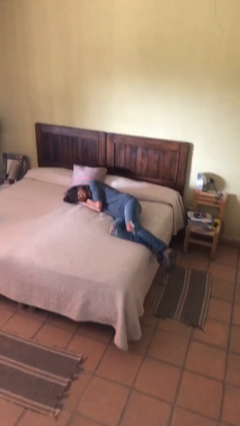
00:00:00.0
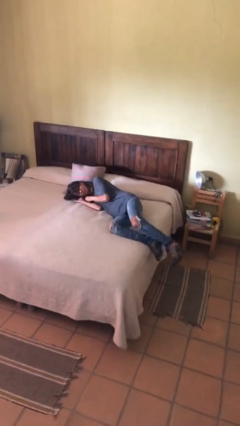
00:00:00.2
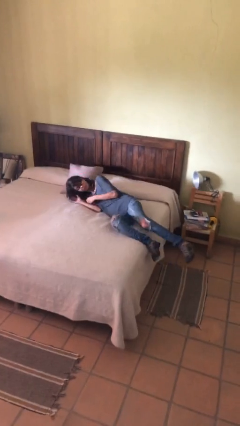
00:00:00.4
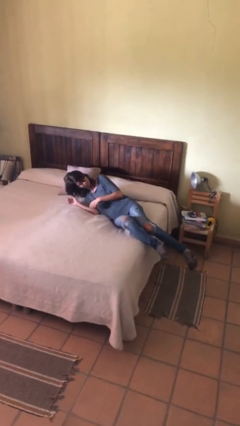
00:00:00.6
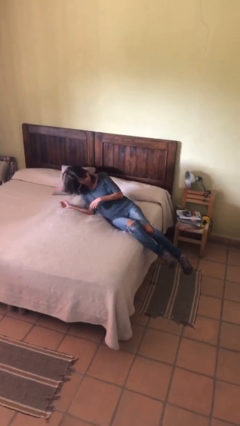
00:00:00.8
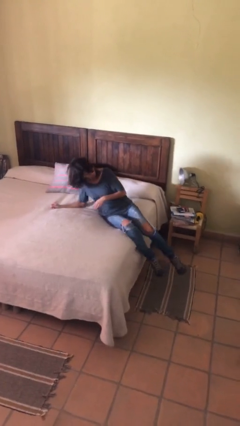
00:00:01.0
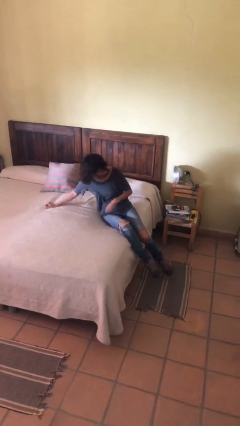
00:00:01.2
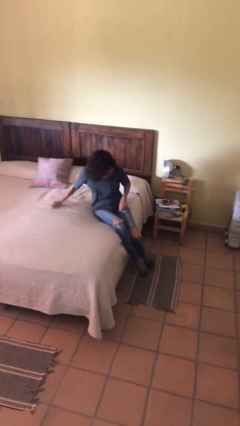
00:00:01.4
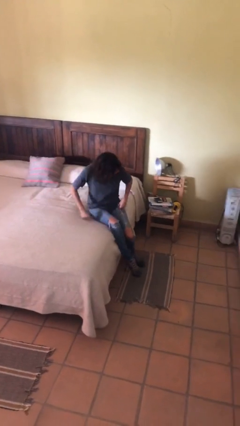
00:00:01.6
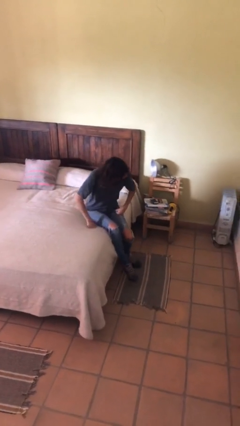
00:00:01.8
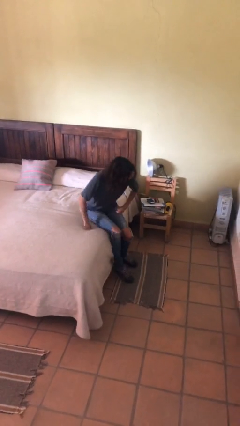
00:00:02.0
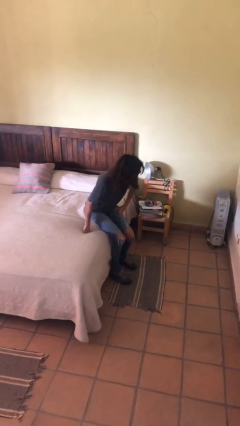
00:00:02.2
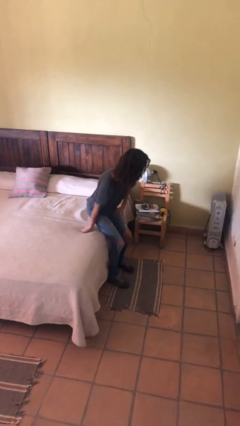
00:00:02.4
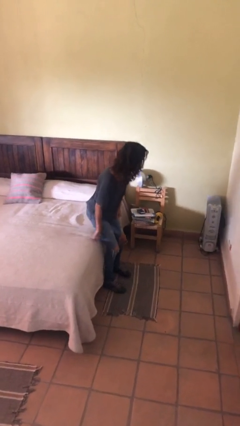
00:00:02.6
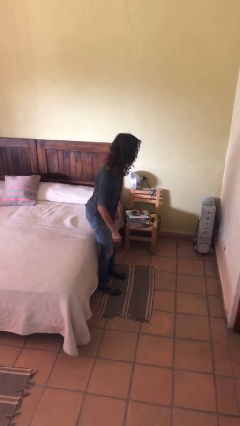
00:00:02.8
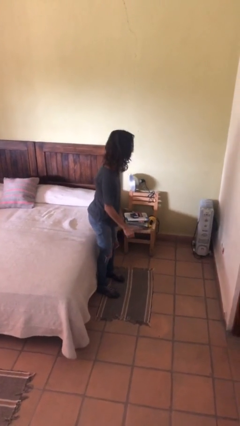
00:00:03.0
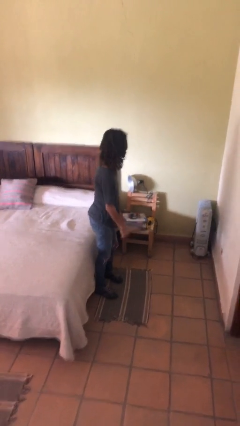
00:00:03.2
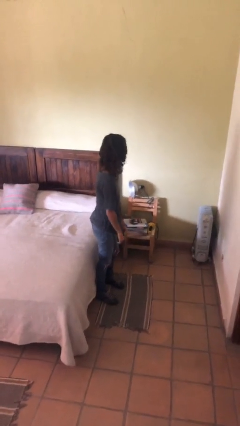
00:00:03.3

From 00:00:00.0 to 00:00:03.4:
person stands up

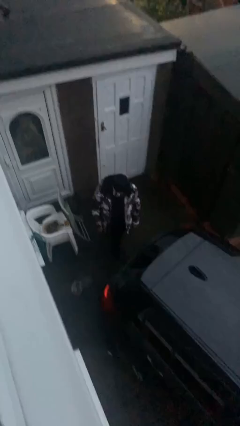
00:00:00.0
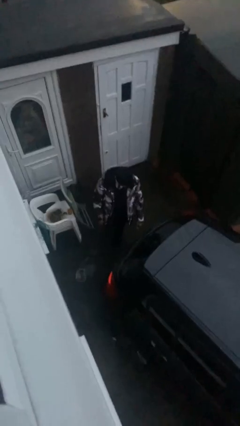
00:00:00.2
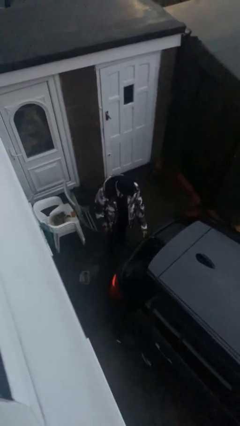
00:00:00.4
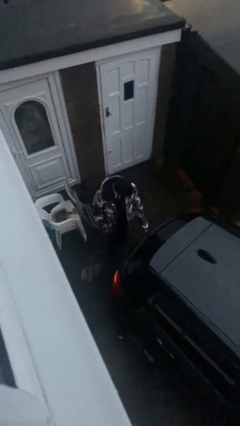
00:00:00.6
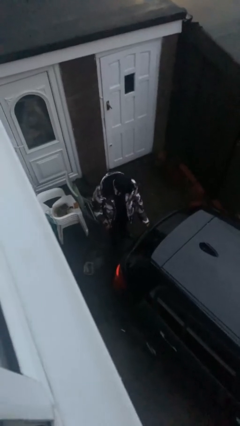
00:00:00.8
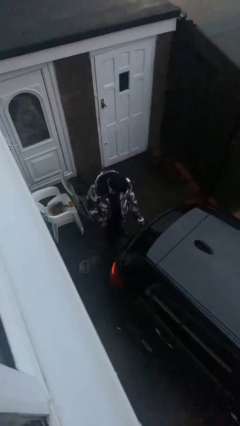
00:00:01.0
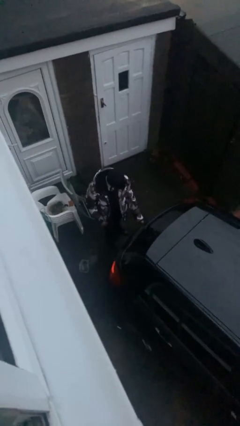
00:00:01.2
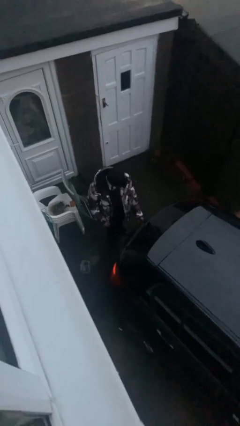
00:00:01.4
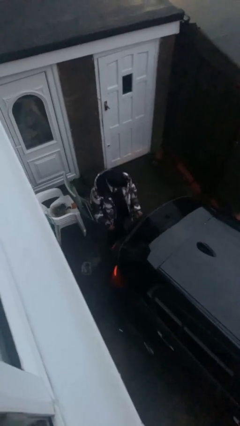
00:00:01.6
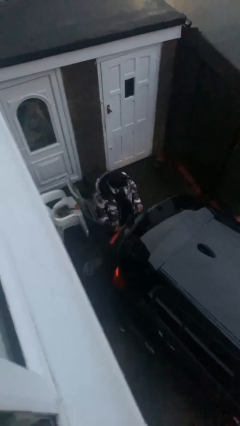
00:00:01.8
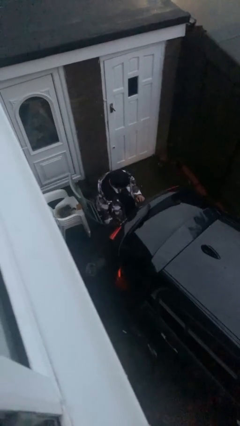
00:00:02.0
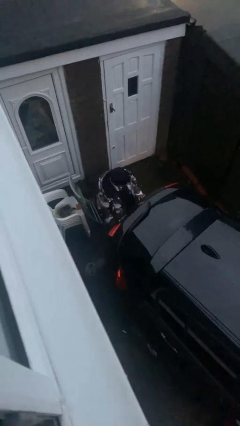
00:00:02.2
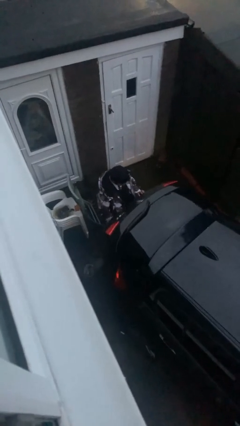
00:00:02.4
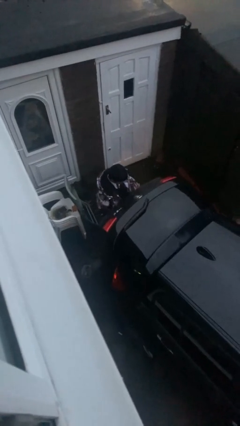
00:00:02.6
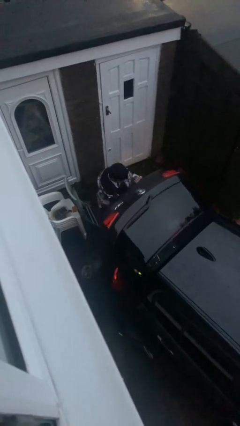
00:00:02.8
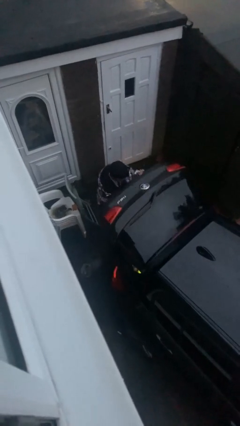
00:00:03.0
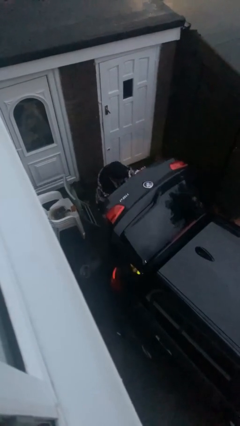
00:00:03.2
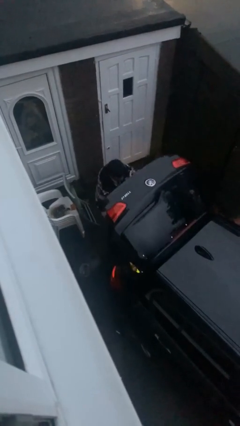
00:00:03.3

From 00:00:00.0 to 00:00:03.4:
person opens car trunk

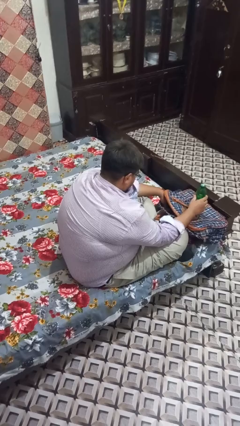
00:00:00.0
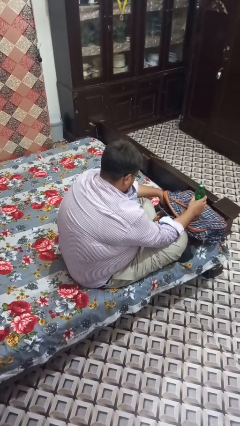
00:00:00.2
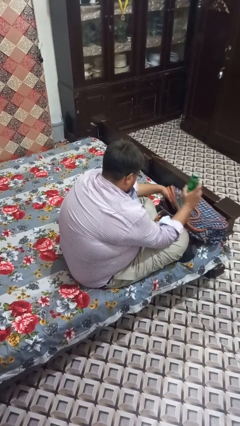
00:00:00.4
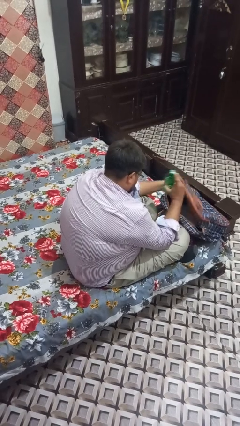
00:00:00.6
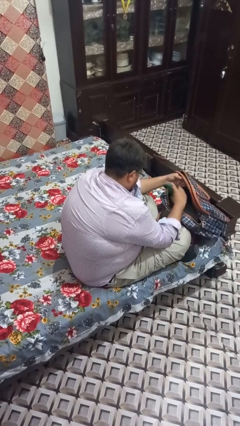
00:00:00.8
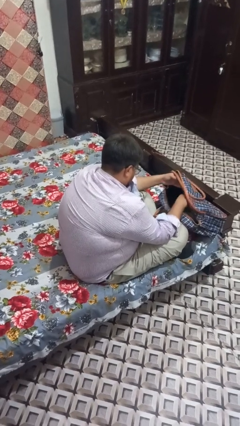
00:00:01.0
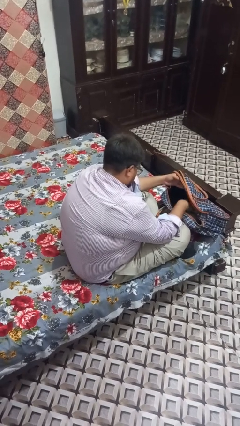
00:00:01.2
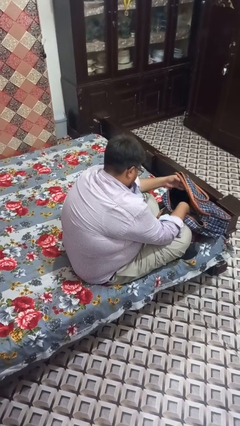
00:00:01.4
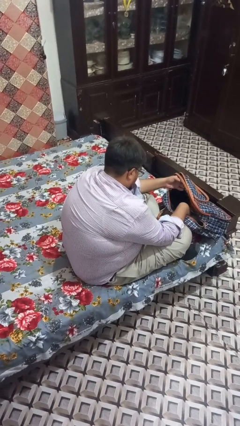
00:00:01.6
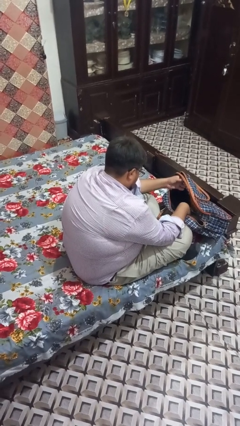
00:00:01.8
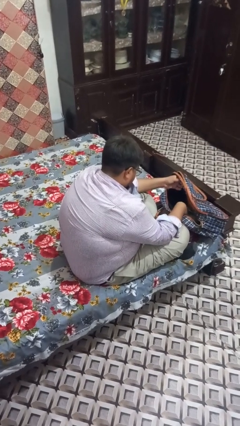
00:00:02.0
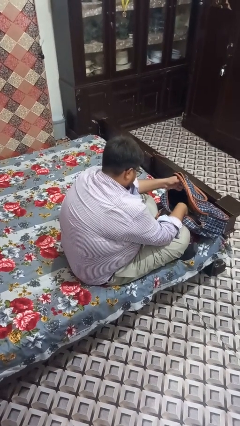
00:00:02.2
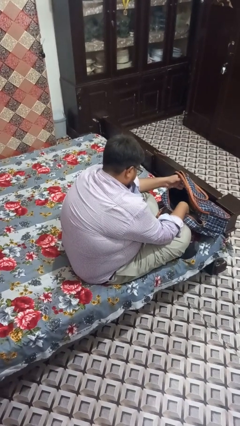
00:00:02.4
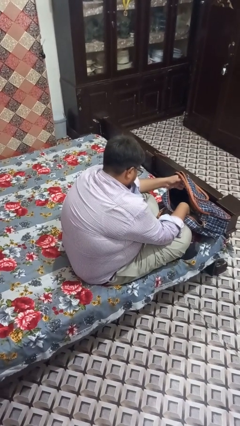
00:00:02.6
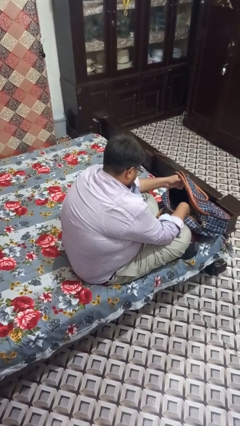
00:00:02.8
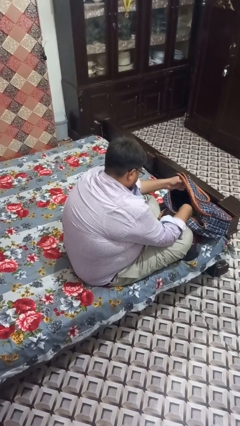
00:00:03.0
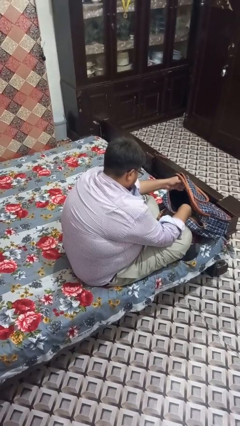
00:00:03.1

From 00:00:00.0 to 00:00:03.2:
person puts object into backpack

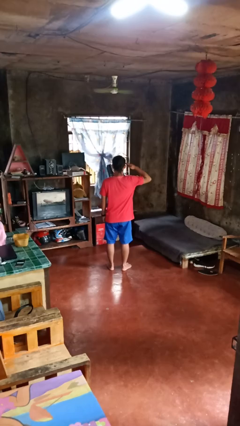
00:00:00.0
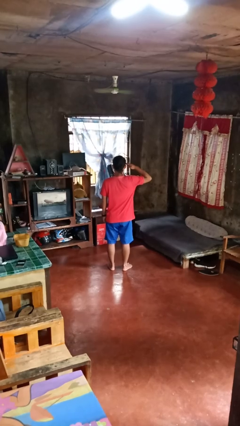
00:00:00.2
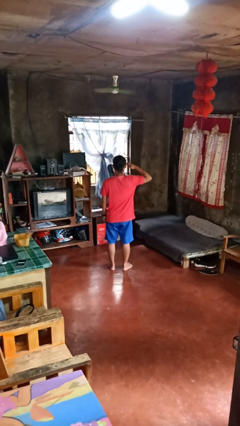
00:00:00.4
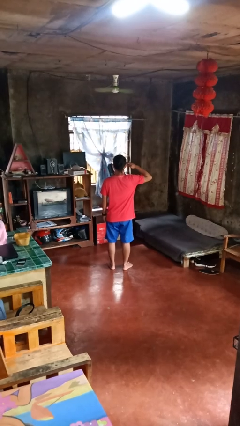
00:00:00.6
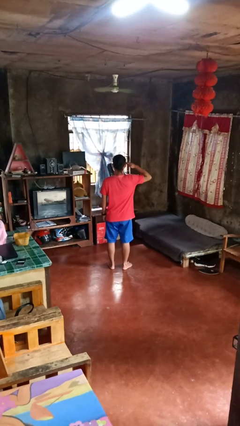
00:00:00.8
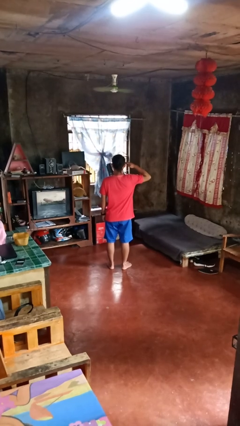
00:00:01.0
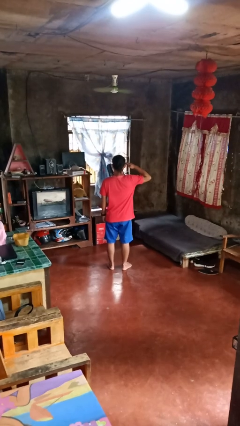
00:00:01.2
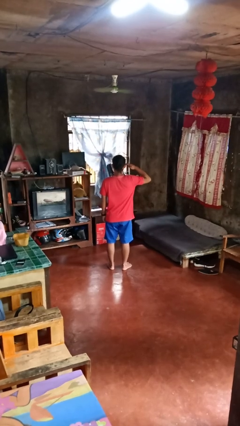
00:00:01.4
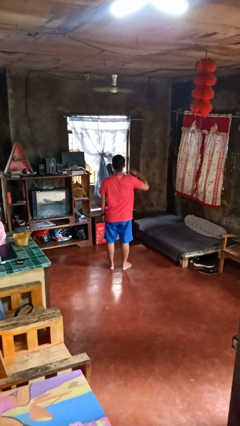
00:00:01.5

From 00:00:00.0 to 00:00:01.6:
person salutes

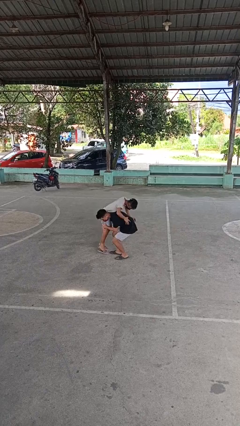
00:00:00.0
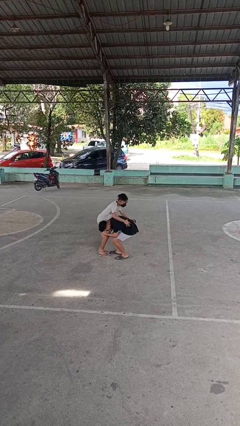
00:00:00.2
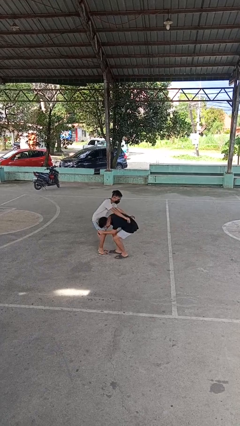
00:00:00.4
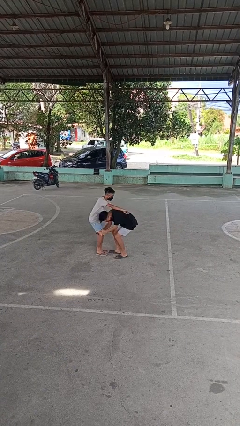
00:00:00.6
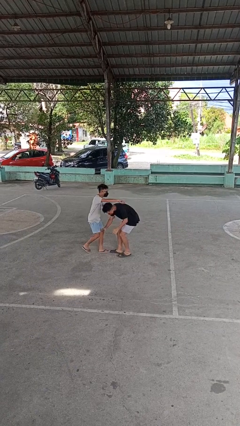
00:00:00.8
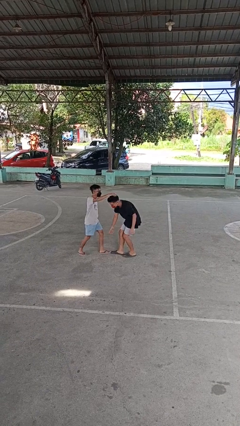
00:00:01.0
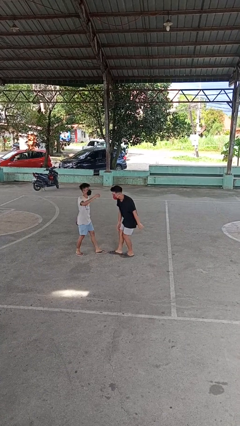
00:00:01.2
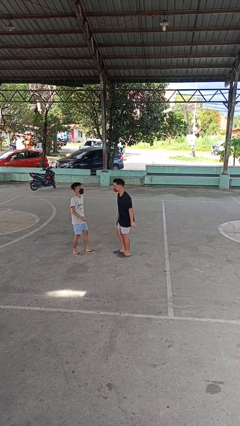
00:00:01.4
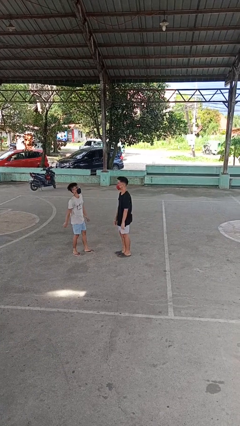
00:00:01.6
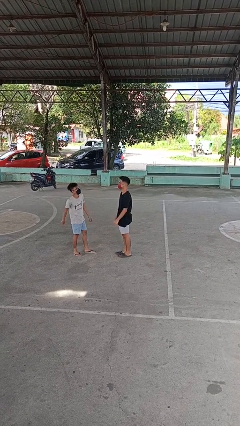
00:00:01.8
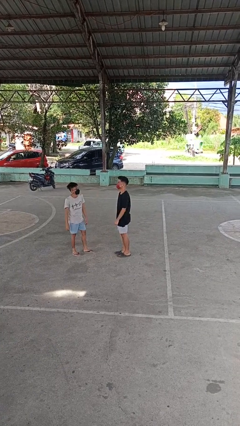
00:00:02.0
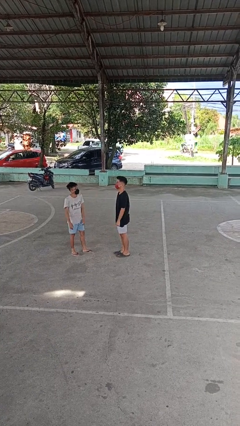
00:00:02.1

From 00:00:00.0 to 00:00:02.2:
person puts down person

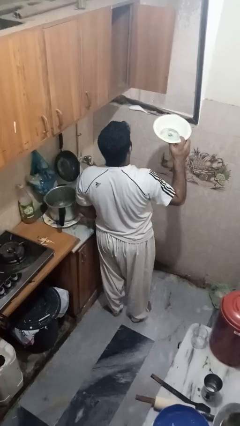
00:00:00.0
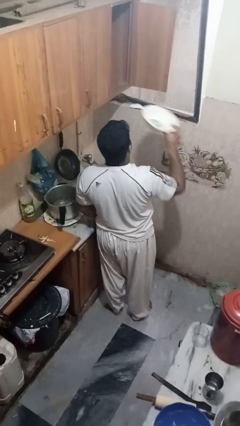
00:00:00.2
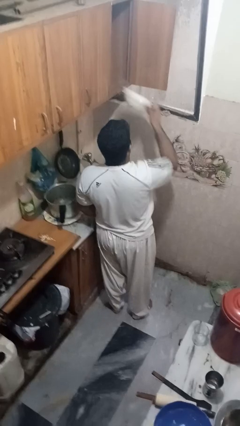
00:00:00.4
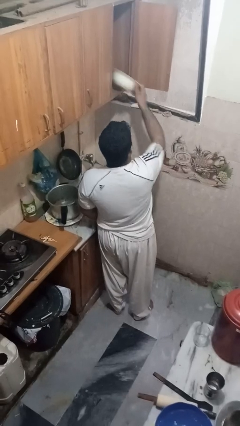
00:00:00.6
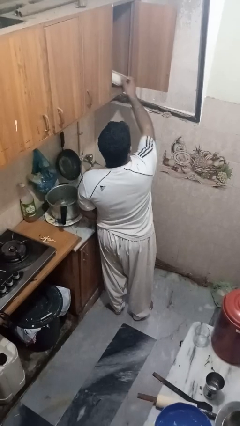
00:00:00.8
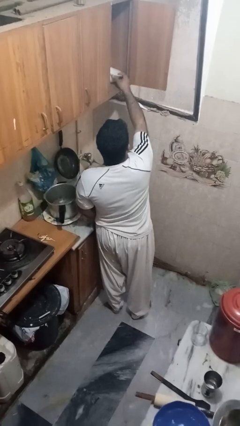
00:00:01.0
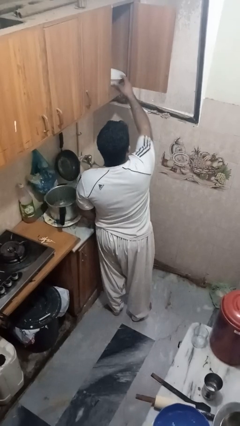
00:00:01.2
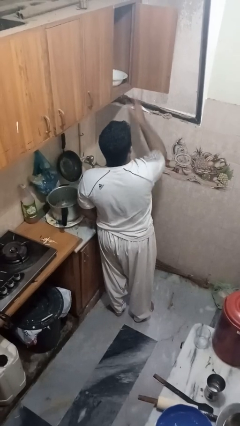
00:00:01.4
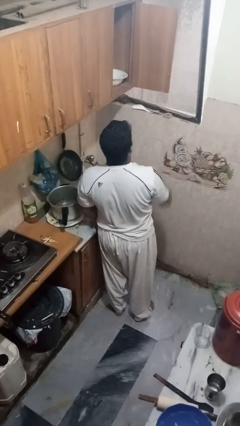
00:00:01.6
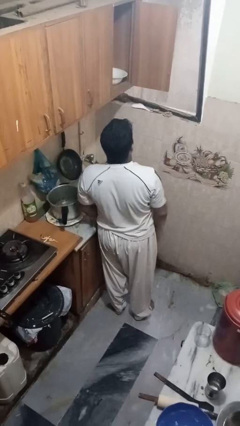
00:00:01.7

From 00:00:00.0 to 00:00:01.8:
person puts object in cabinet

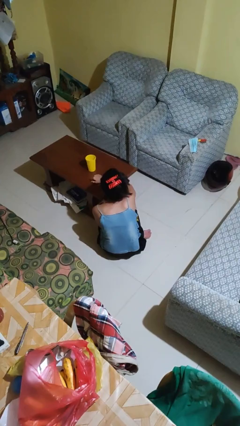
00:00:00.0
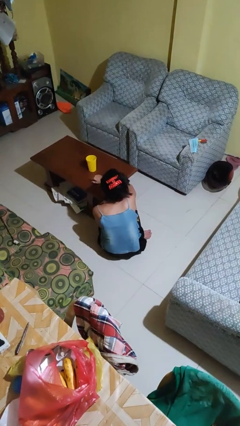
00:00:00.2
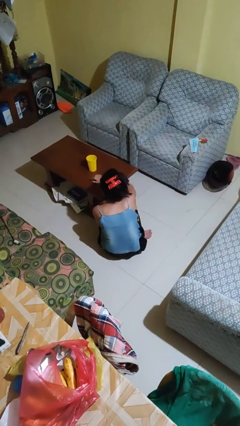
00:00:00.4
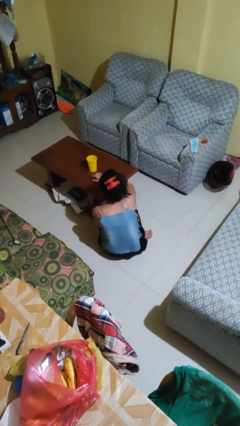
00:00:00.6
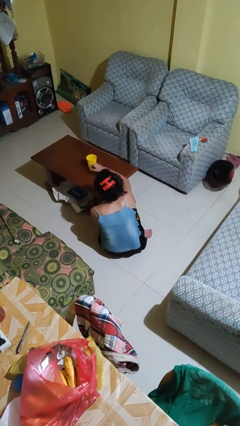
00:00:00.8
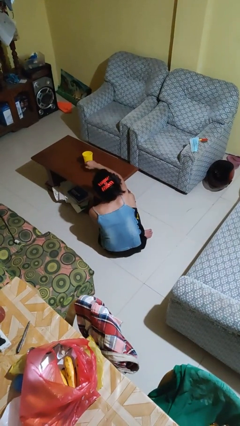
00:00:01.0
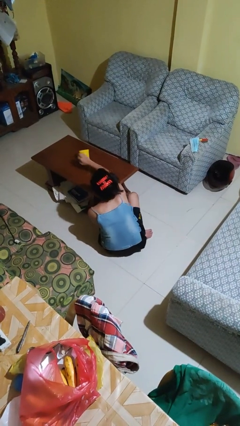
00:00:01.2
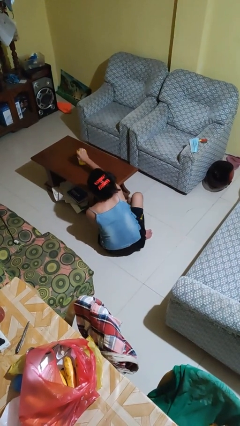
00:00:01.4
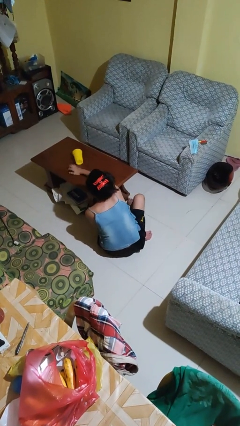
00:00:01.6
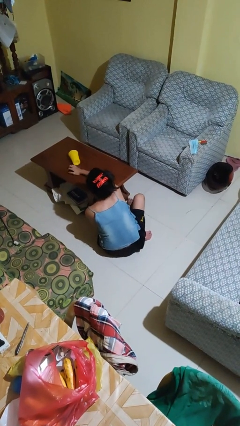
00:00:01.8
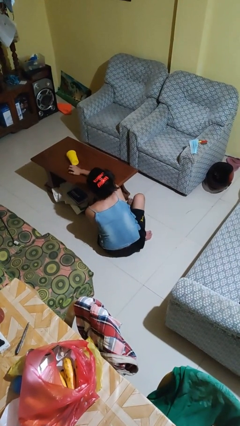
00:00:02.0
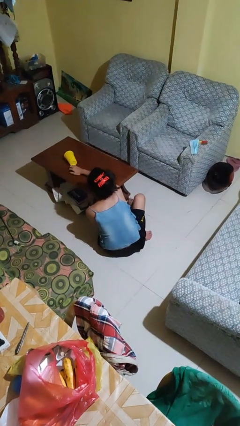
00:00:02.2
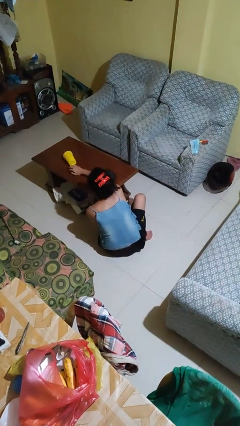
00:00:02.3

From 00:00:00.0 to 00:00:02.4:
person knocks over glass
